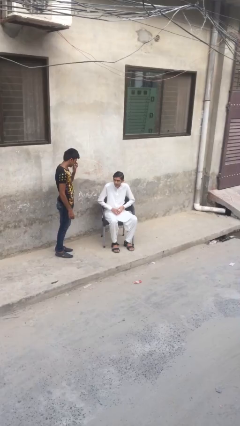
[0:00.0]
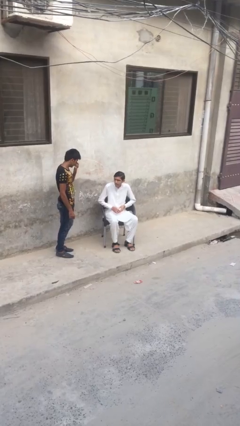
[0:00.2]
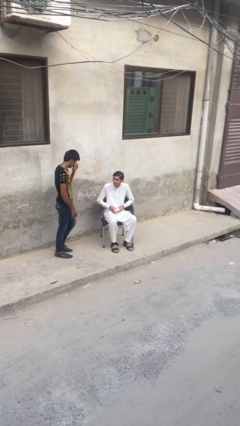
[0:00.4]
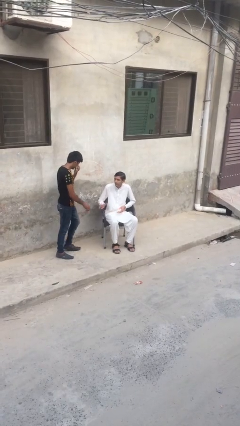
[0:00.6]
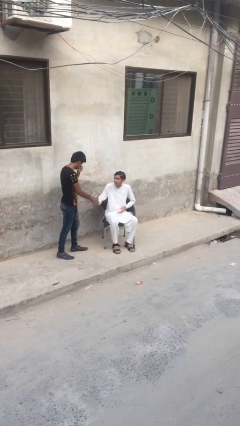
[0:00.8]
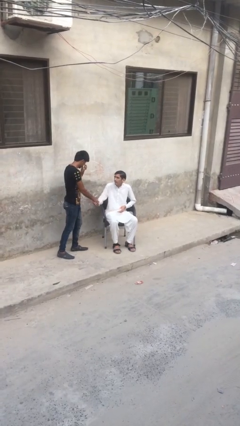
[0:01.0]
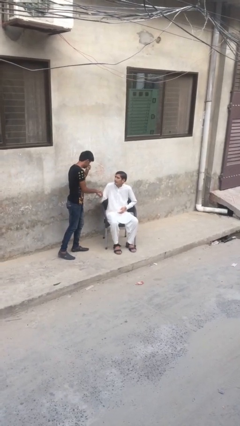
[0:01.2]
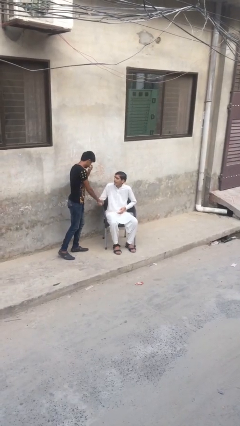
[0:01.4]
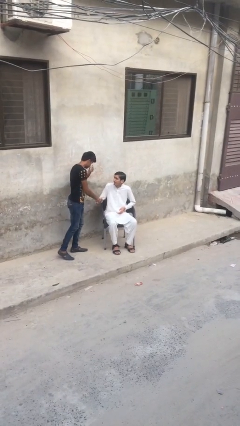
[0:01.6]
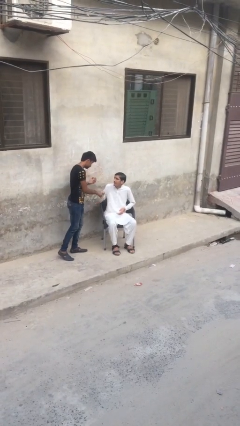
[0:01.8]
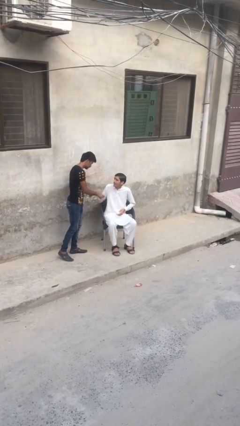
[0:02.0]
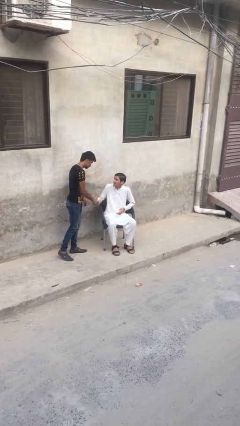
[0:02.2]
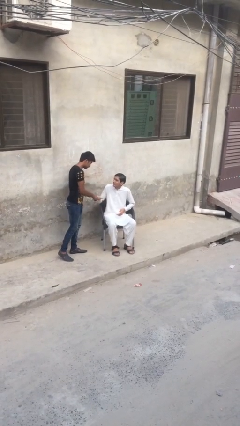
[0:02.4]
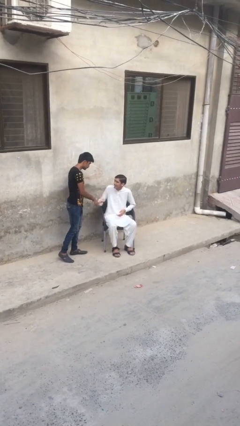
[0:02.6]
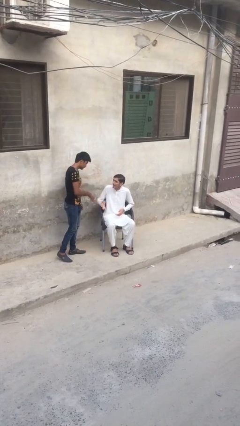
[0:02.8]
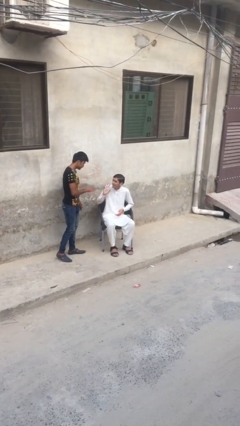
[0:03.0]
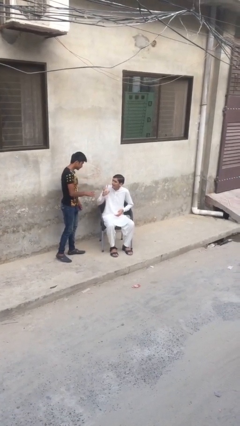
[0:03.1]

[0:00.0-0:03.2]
person shakes hand

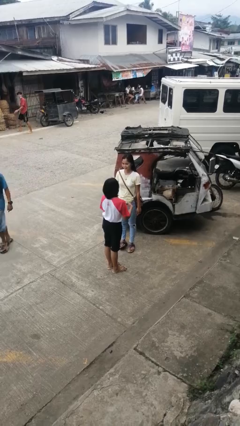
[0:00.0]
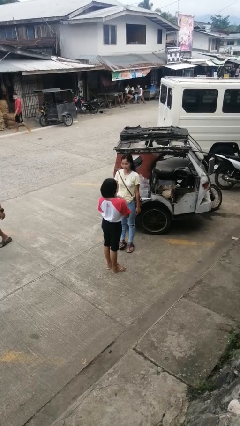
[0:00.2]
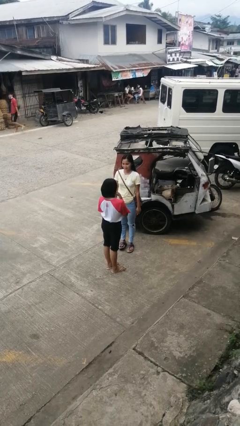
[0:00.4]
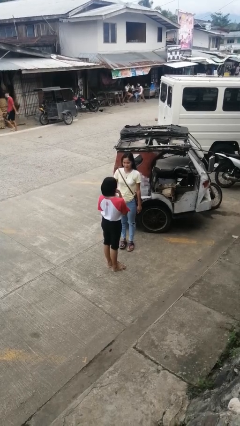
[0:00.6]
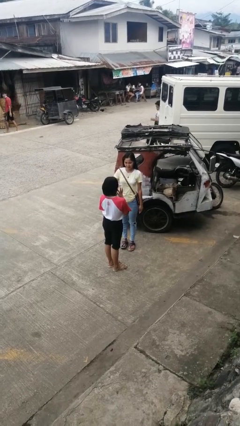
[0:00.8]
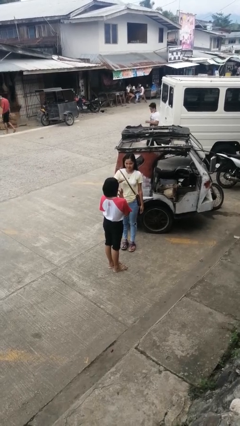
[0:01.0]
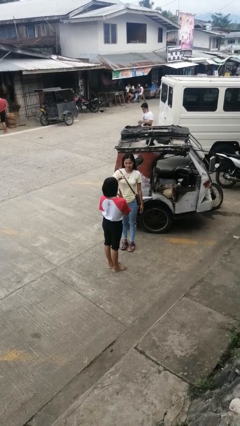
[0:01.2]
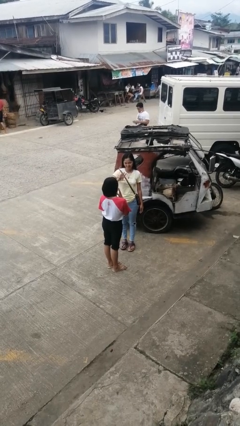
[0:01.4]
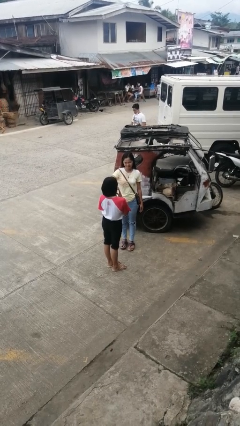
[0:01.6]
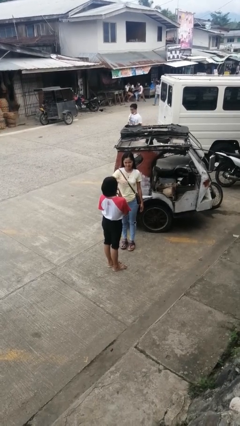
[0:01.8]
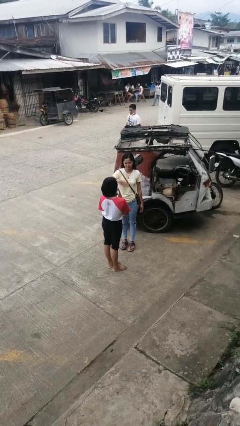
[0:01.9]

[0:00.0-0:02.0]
person shoves person

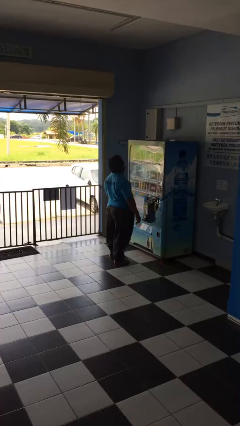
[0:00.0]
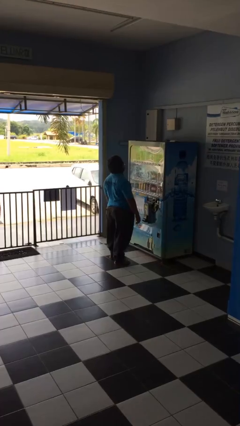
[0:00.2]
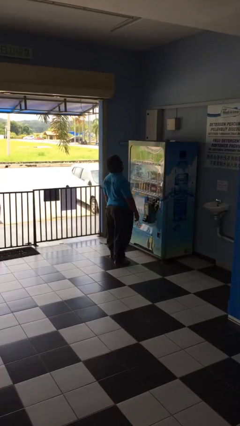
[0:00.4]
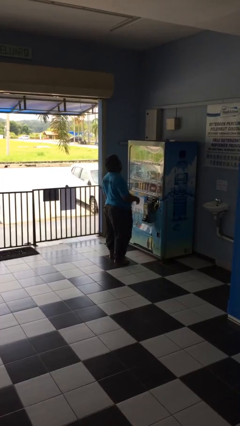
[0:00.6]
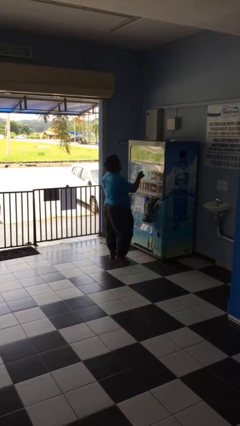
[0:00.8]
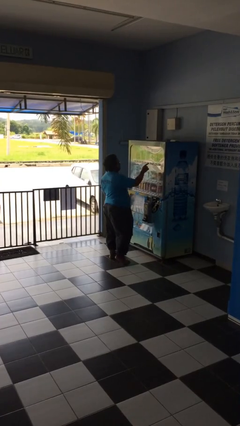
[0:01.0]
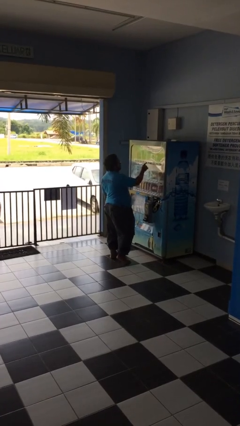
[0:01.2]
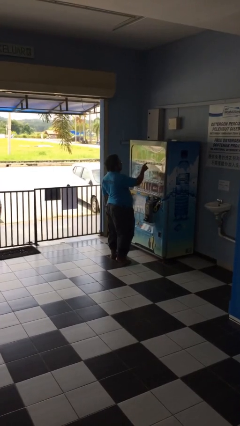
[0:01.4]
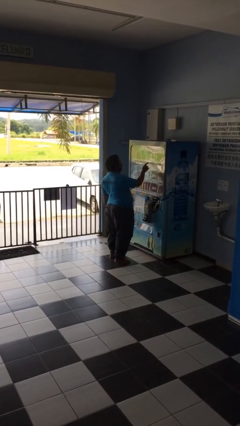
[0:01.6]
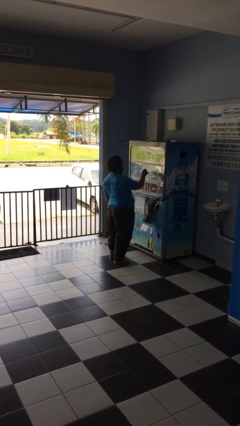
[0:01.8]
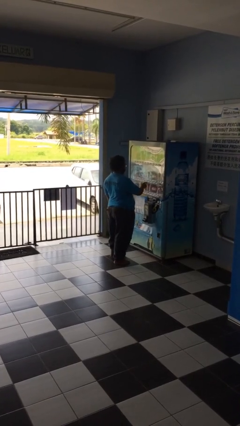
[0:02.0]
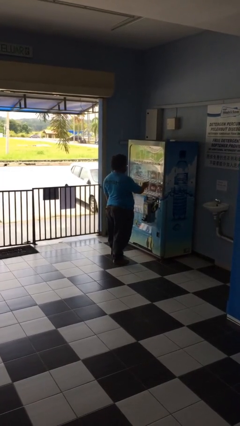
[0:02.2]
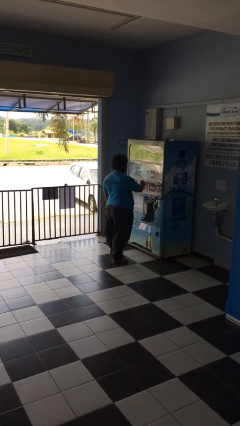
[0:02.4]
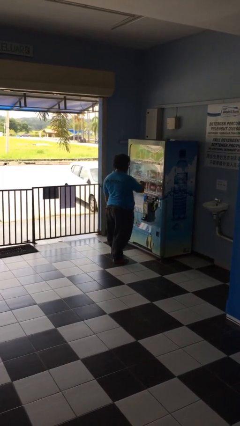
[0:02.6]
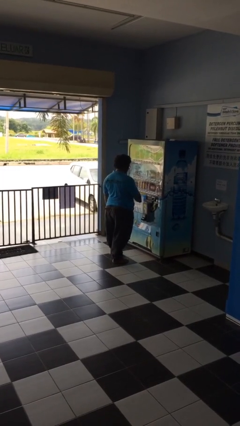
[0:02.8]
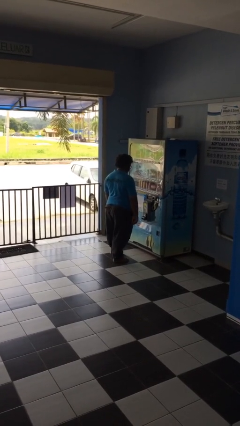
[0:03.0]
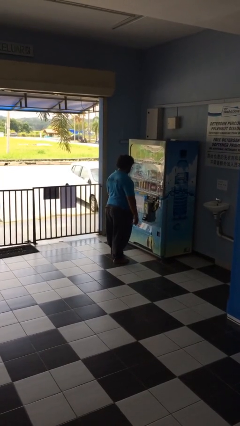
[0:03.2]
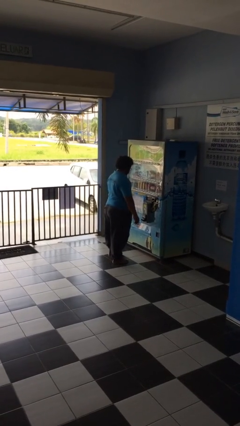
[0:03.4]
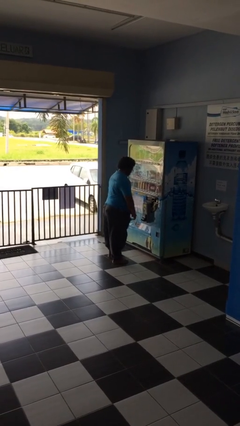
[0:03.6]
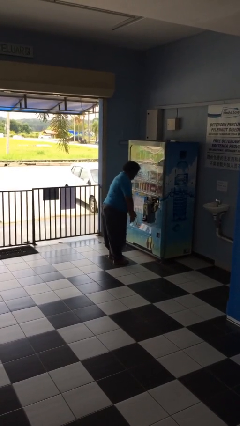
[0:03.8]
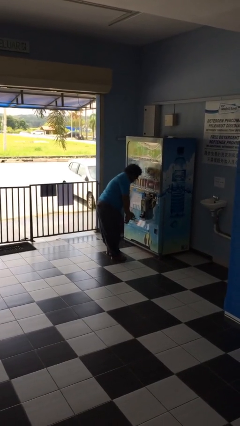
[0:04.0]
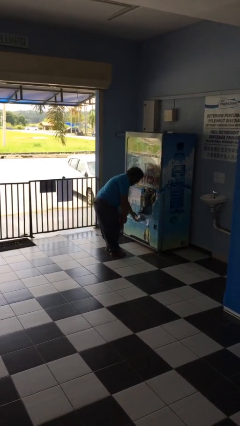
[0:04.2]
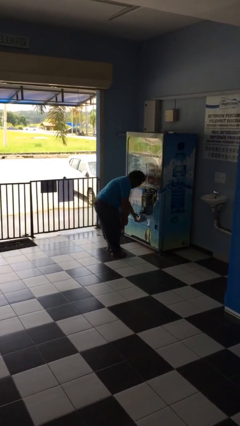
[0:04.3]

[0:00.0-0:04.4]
person purchases from machine

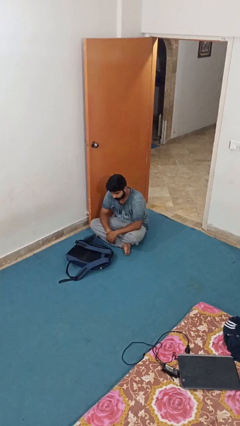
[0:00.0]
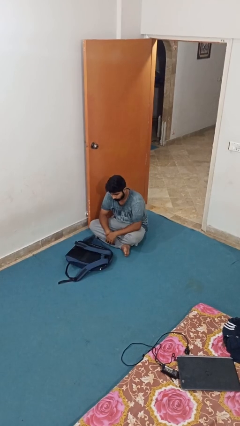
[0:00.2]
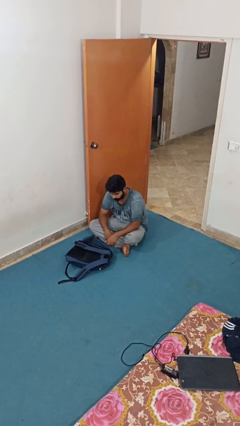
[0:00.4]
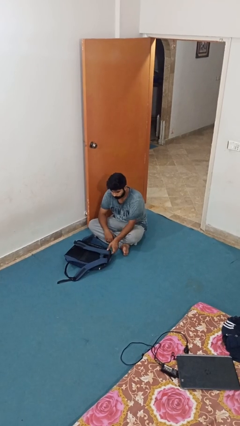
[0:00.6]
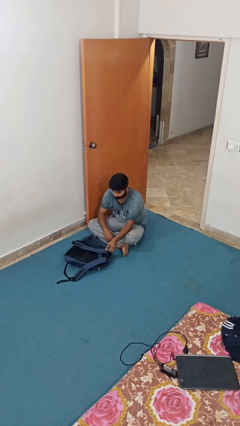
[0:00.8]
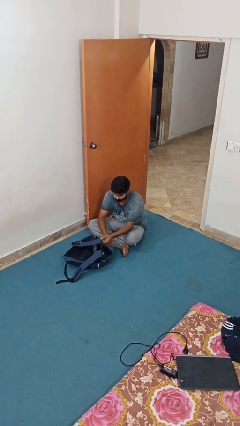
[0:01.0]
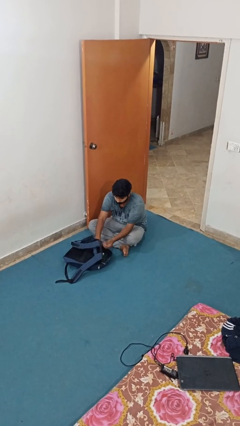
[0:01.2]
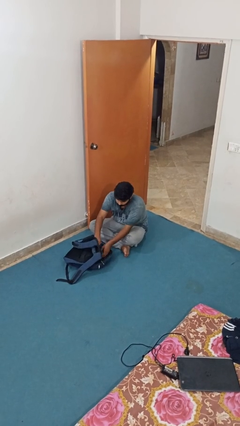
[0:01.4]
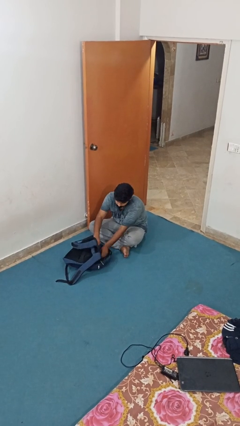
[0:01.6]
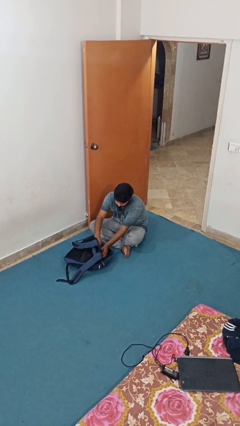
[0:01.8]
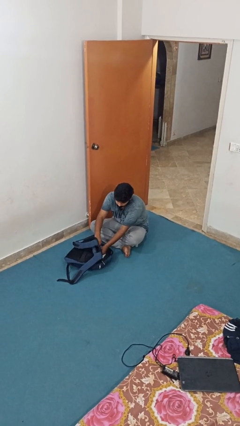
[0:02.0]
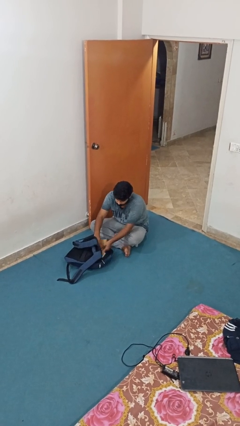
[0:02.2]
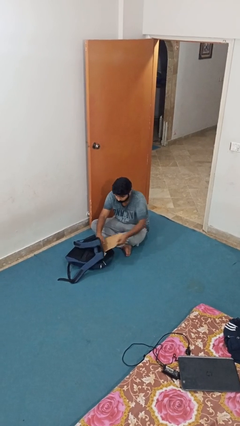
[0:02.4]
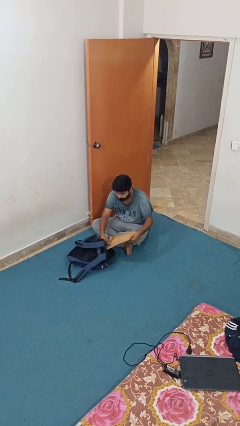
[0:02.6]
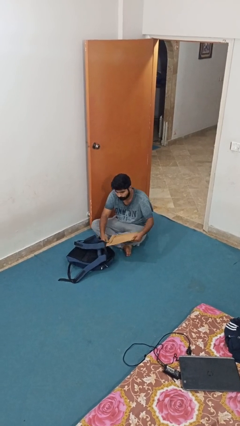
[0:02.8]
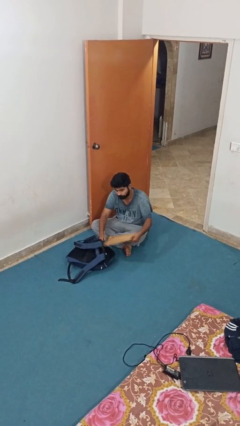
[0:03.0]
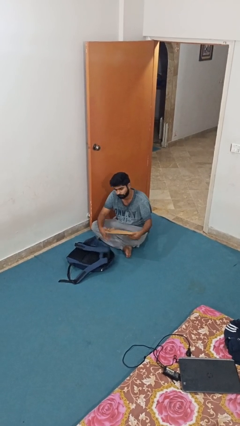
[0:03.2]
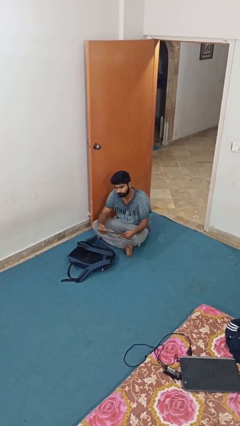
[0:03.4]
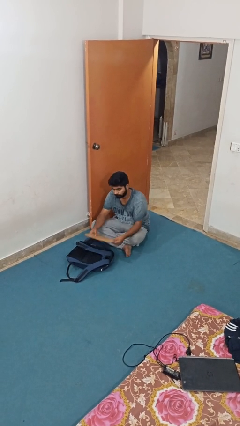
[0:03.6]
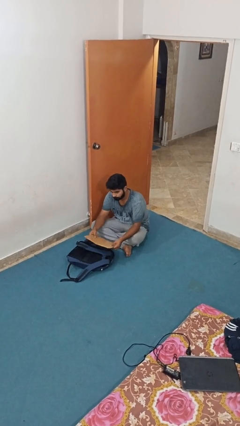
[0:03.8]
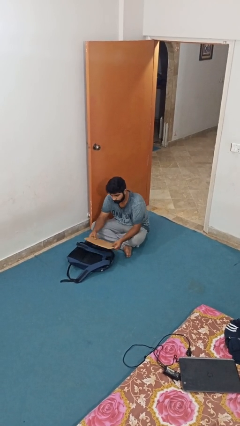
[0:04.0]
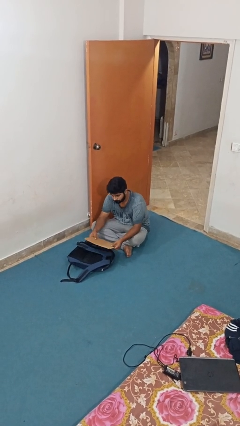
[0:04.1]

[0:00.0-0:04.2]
person searches in backpack

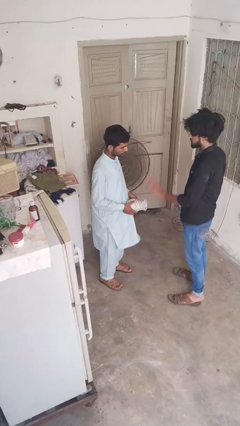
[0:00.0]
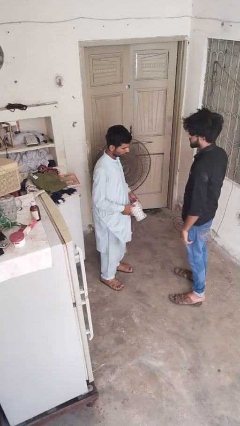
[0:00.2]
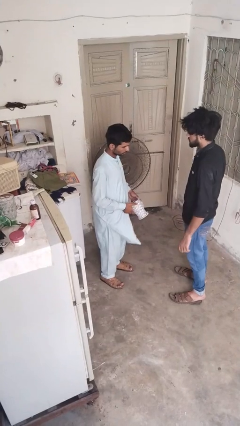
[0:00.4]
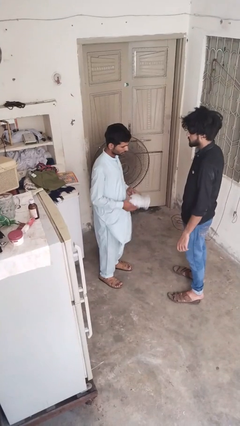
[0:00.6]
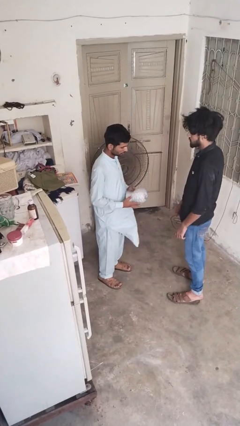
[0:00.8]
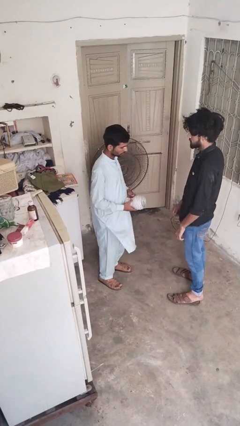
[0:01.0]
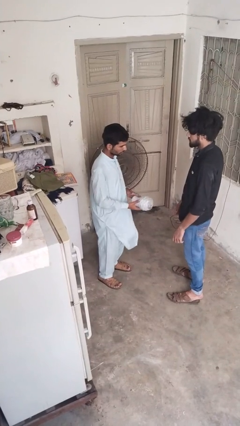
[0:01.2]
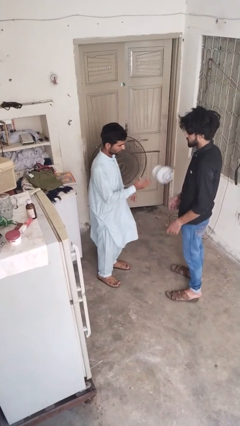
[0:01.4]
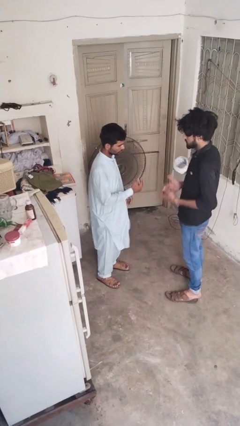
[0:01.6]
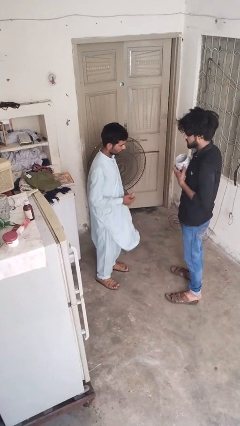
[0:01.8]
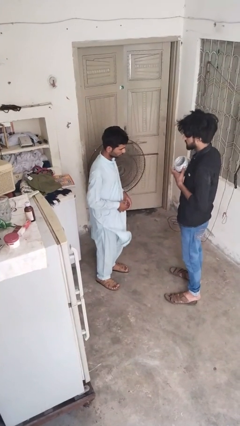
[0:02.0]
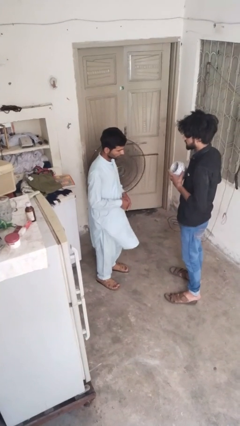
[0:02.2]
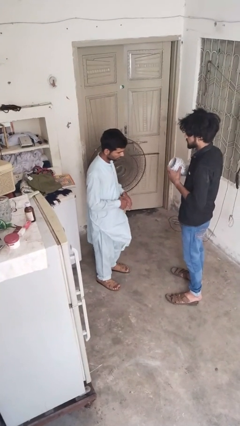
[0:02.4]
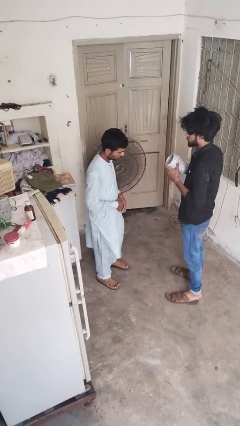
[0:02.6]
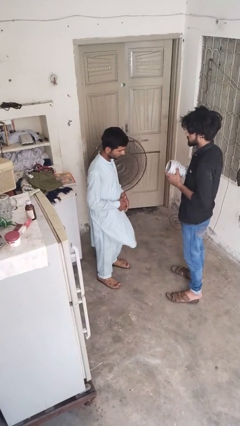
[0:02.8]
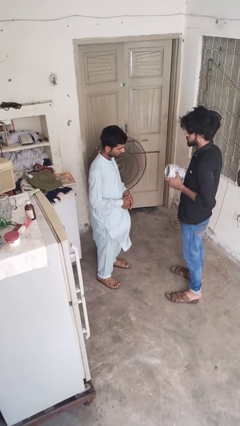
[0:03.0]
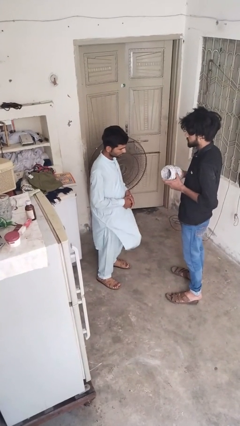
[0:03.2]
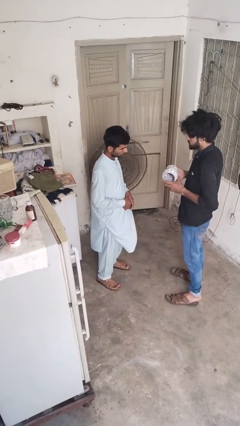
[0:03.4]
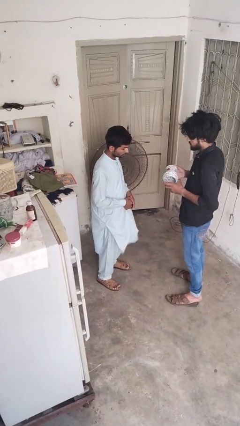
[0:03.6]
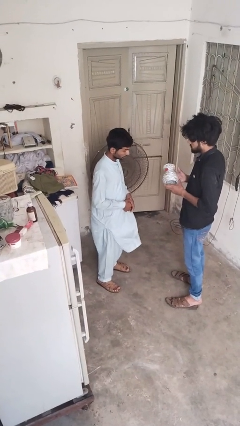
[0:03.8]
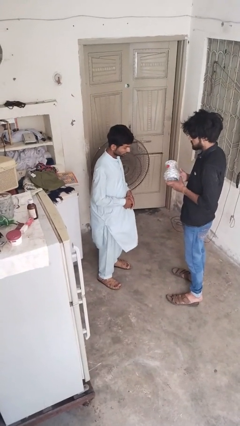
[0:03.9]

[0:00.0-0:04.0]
person throws object to person
